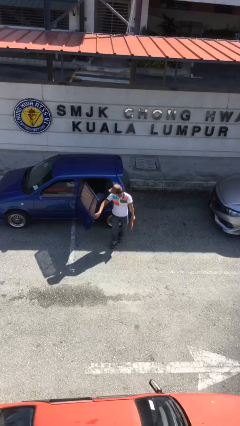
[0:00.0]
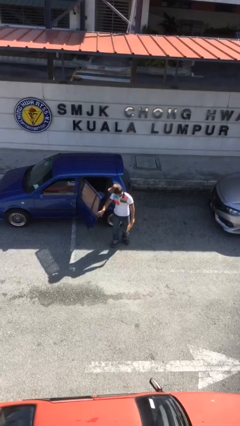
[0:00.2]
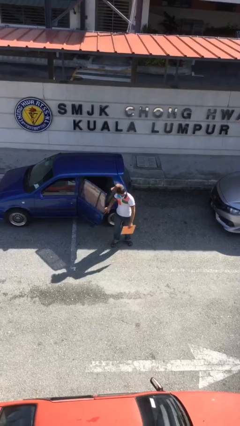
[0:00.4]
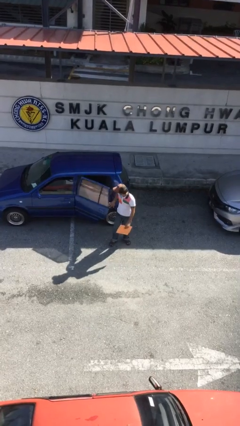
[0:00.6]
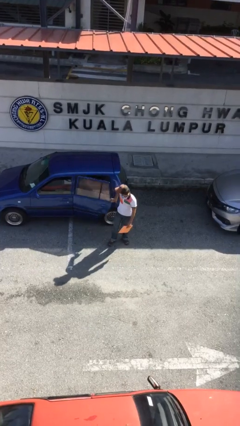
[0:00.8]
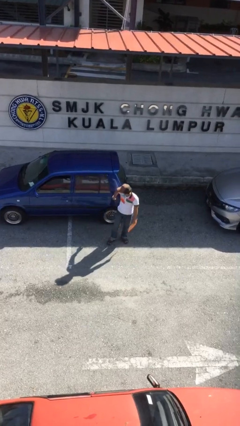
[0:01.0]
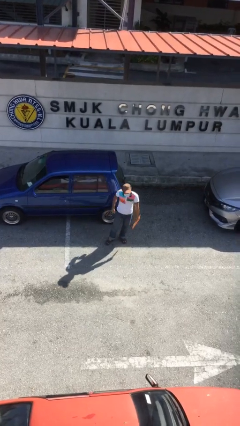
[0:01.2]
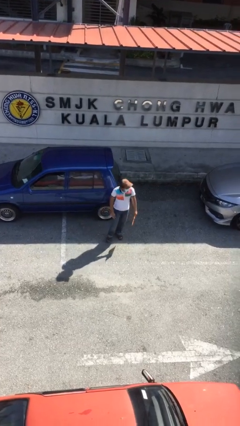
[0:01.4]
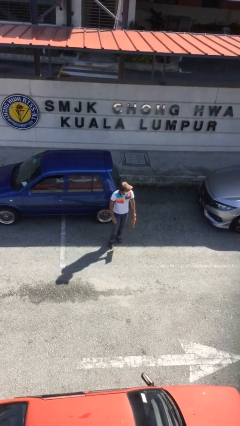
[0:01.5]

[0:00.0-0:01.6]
person closes car door

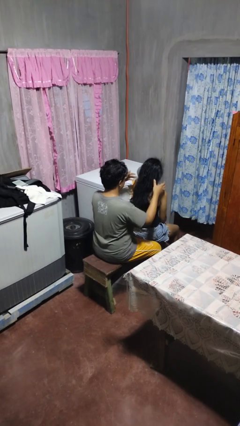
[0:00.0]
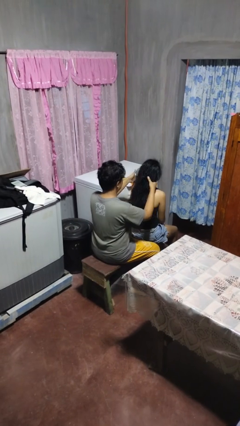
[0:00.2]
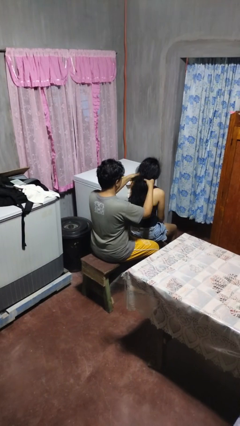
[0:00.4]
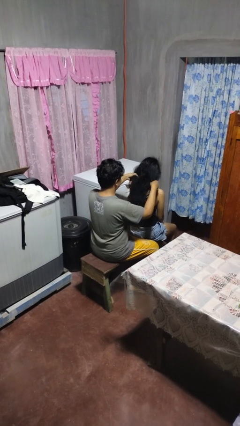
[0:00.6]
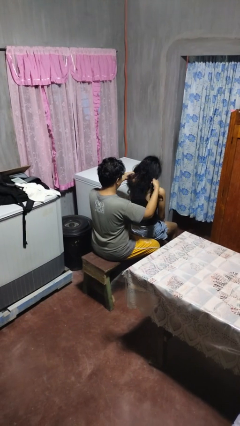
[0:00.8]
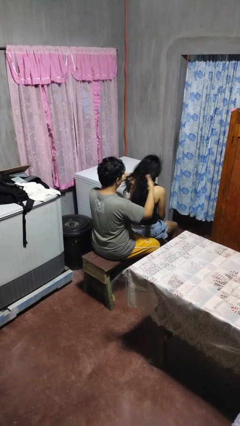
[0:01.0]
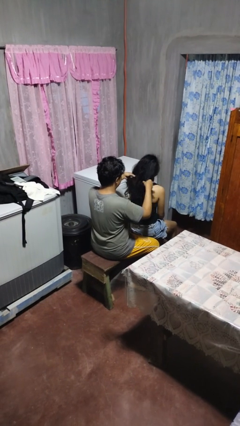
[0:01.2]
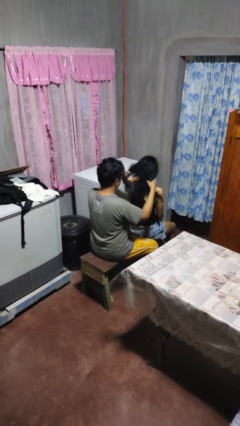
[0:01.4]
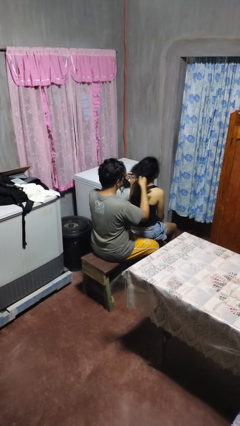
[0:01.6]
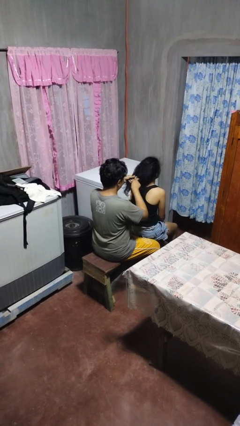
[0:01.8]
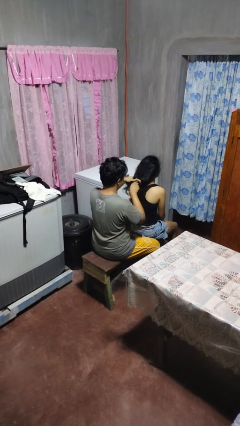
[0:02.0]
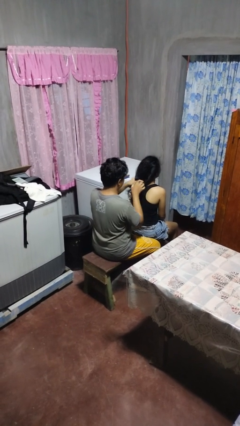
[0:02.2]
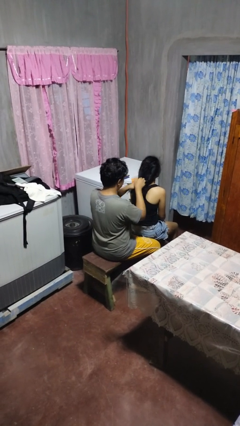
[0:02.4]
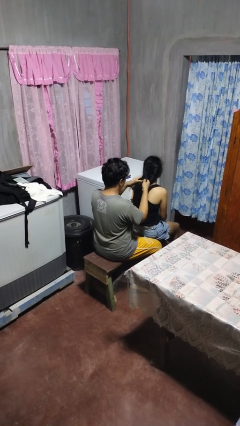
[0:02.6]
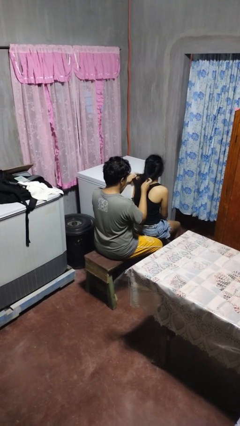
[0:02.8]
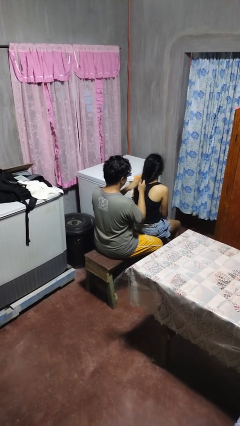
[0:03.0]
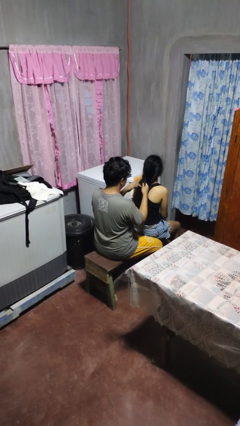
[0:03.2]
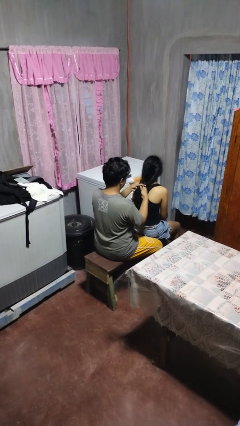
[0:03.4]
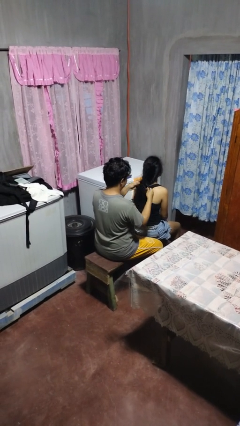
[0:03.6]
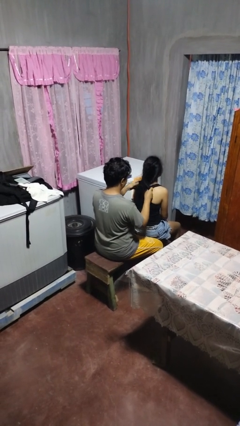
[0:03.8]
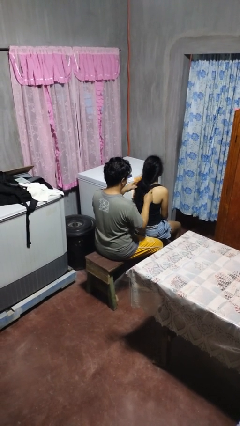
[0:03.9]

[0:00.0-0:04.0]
person braids hair of person

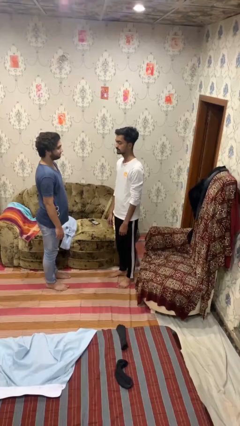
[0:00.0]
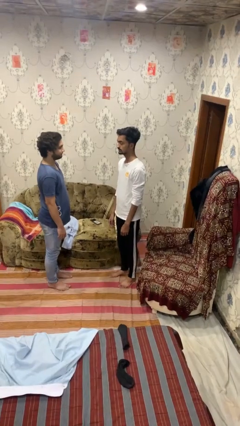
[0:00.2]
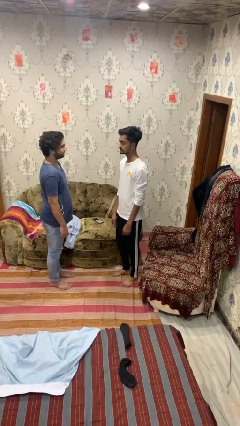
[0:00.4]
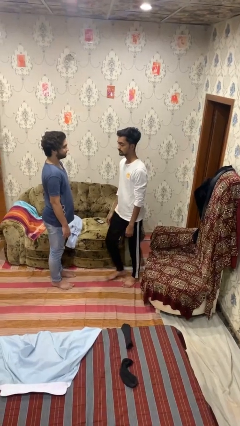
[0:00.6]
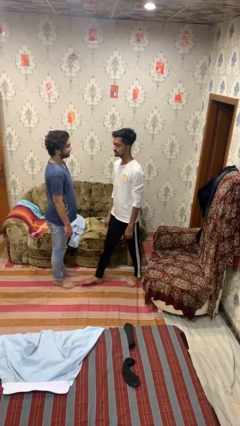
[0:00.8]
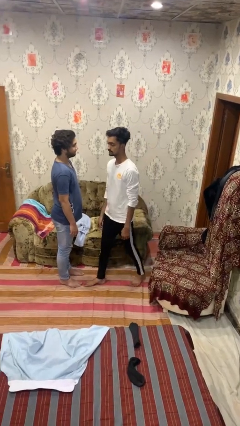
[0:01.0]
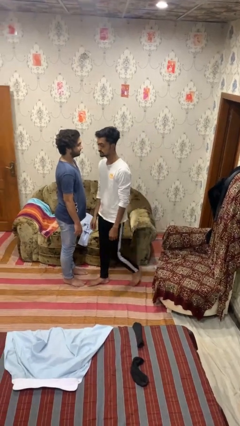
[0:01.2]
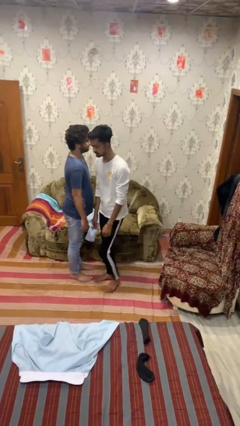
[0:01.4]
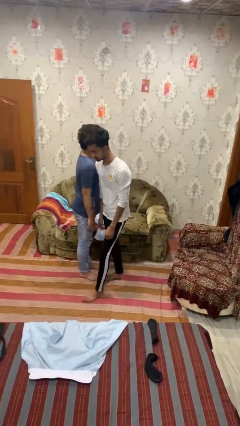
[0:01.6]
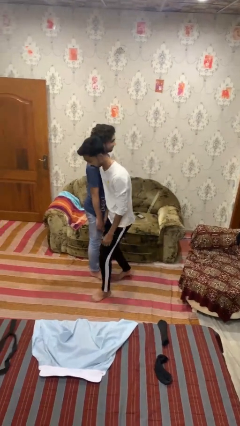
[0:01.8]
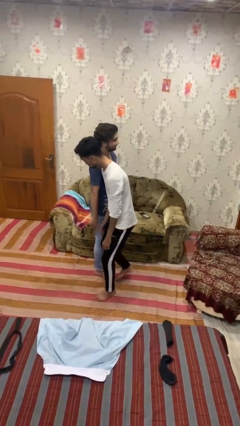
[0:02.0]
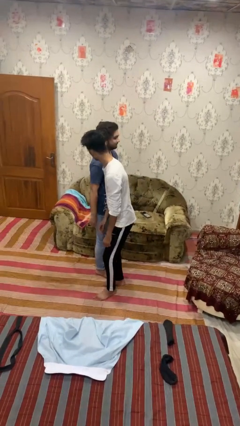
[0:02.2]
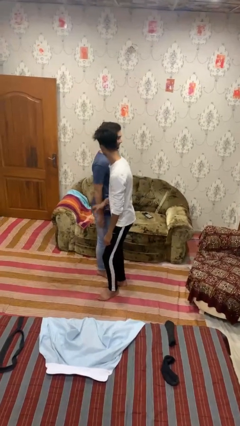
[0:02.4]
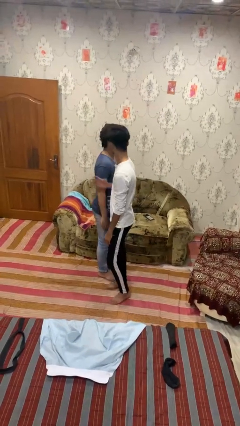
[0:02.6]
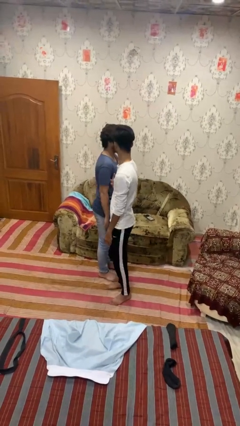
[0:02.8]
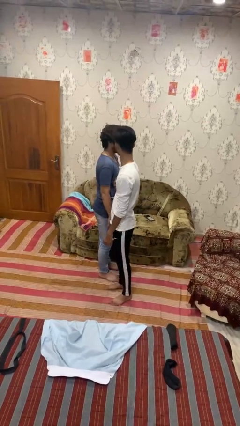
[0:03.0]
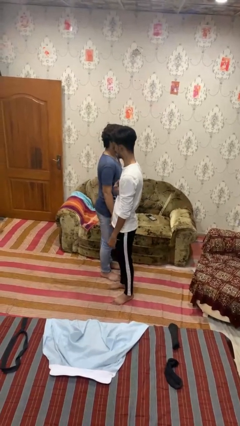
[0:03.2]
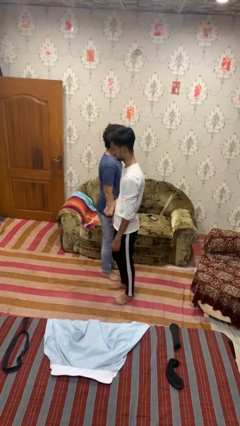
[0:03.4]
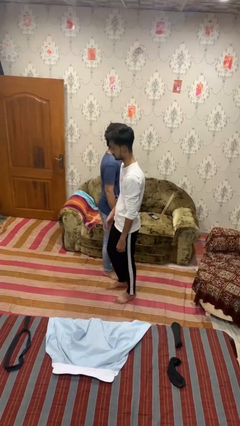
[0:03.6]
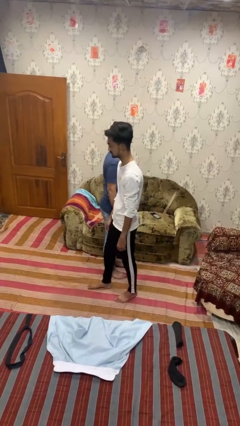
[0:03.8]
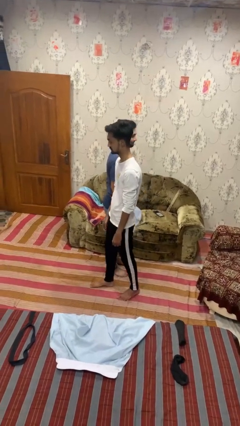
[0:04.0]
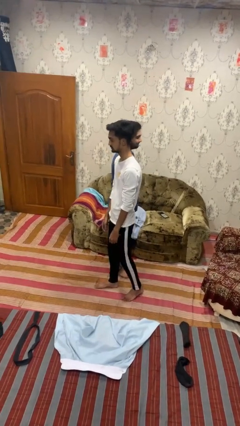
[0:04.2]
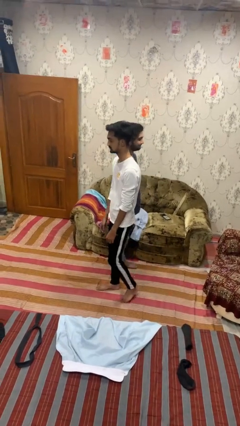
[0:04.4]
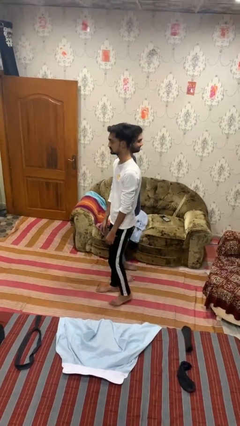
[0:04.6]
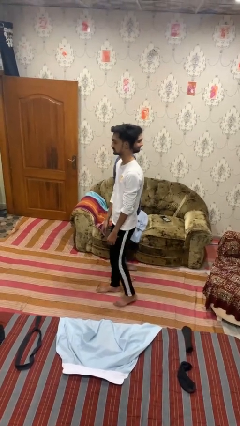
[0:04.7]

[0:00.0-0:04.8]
person bumps into person

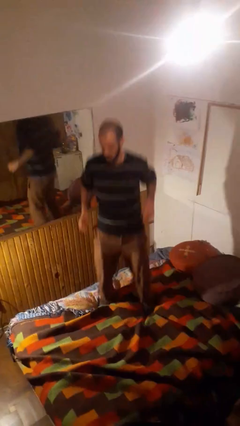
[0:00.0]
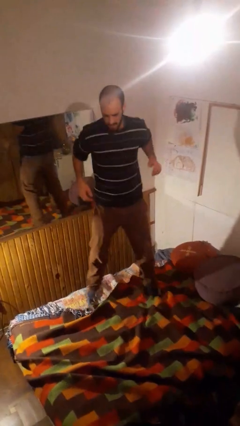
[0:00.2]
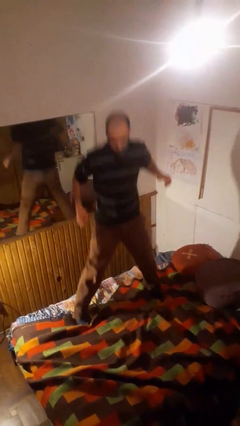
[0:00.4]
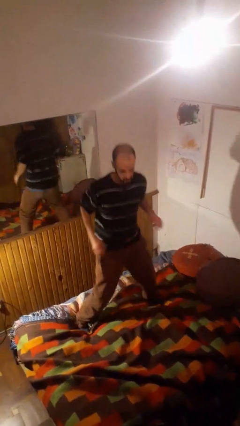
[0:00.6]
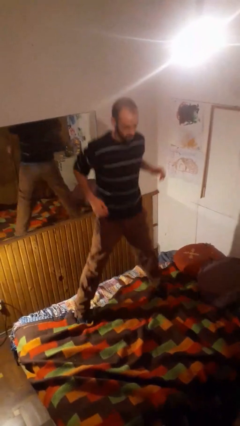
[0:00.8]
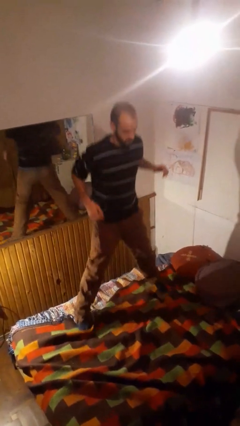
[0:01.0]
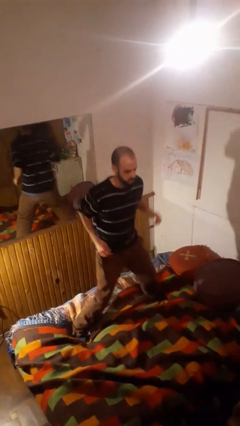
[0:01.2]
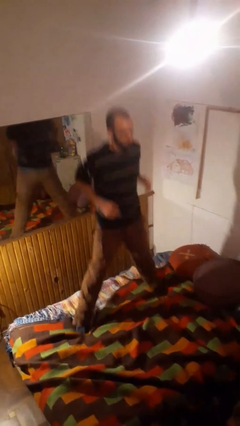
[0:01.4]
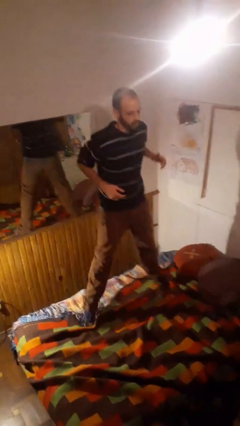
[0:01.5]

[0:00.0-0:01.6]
person jumps on bed

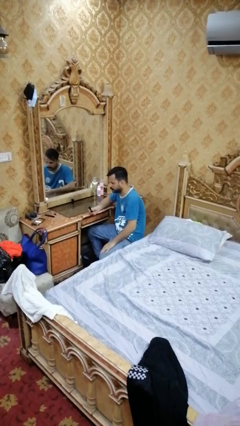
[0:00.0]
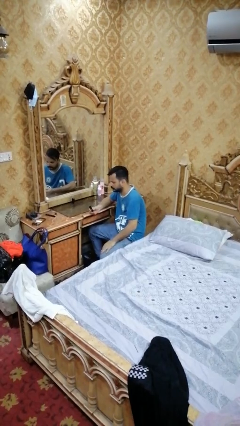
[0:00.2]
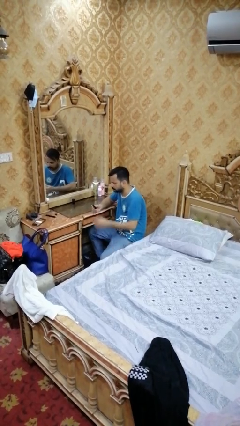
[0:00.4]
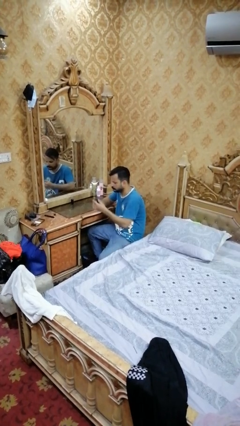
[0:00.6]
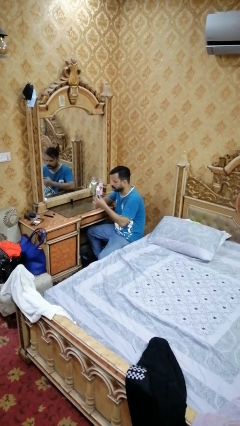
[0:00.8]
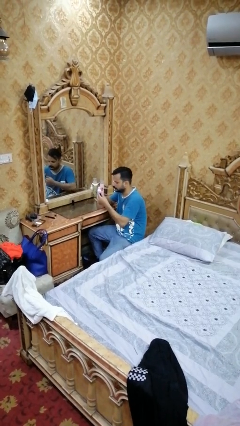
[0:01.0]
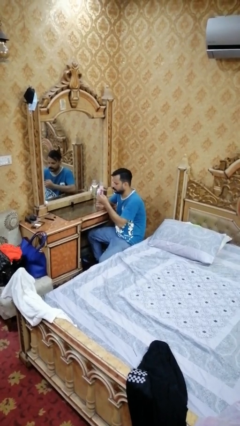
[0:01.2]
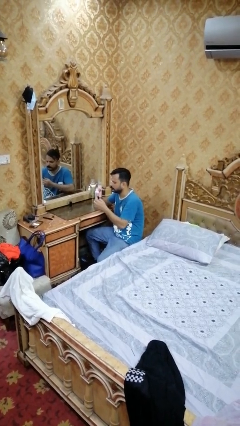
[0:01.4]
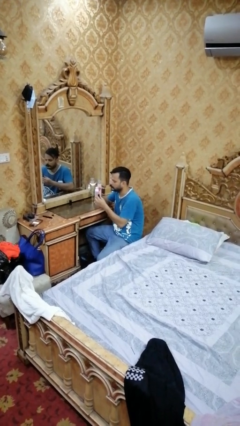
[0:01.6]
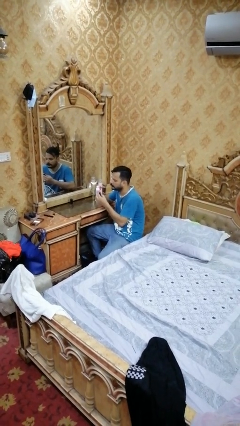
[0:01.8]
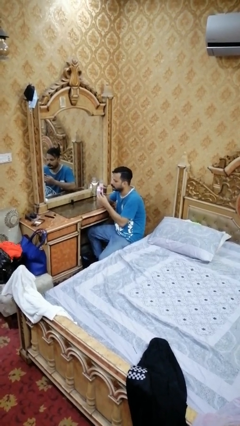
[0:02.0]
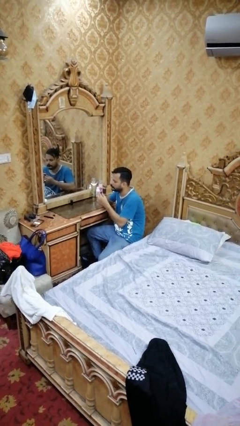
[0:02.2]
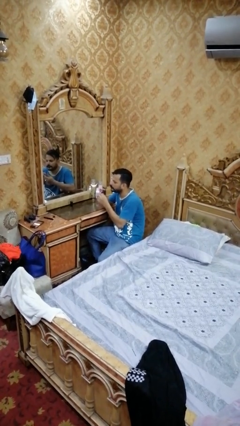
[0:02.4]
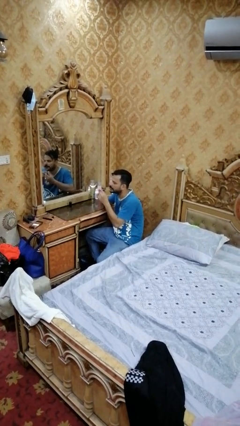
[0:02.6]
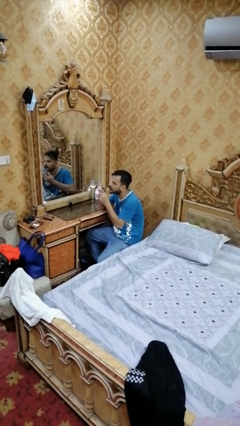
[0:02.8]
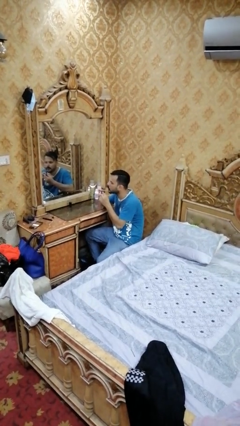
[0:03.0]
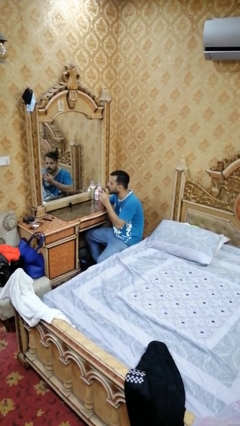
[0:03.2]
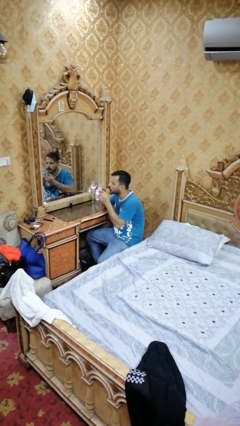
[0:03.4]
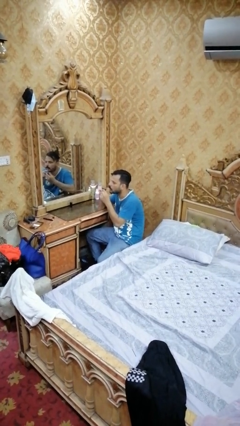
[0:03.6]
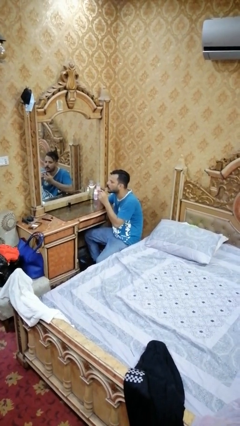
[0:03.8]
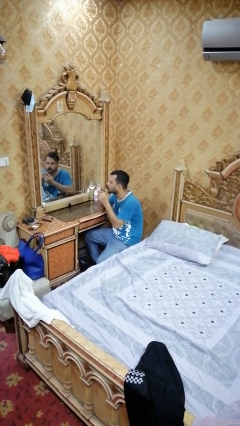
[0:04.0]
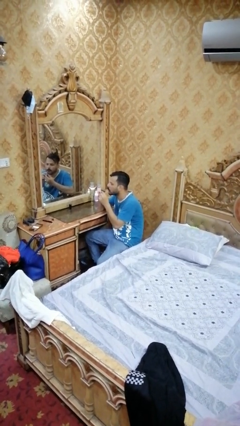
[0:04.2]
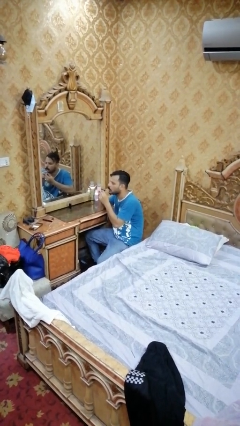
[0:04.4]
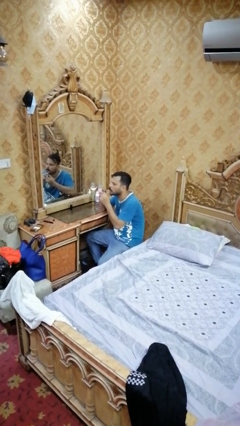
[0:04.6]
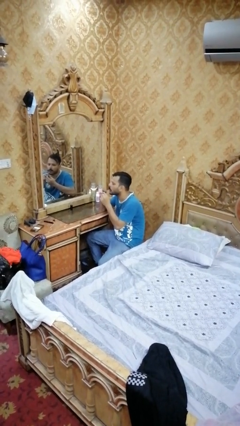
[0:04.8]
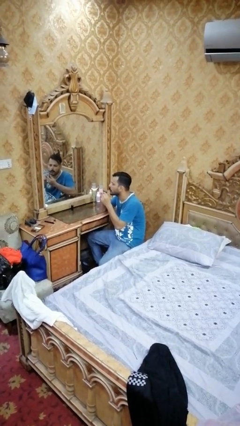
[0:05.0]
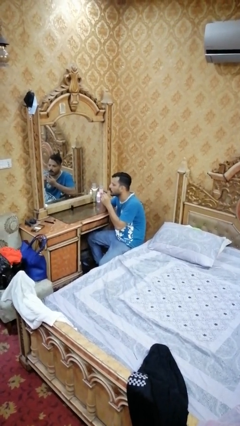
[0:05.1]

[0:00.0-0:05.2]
person applies lip makeup

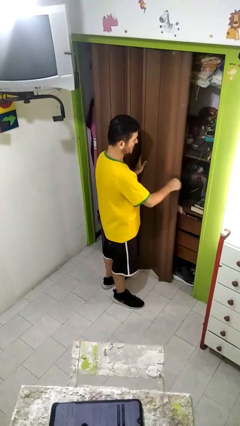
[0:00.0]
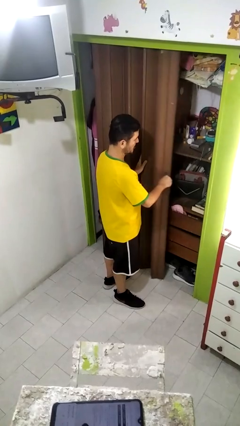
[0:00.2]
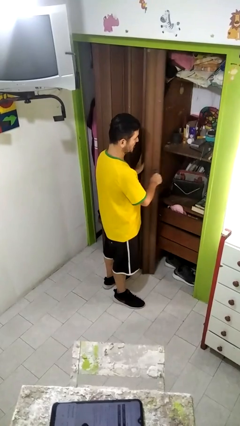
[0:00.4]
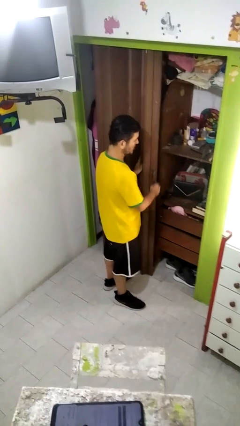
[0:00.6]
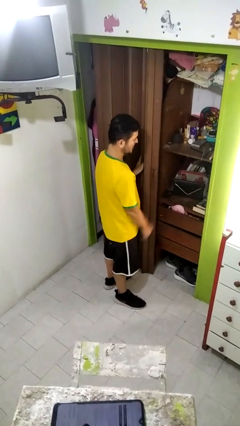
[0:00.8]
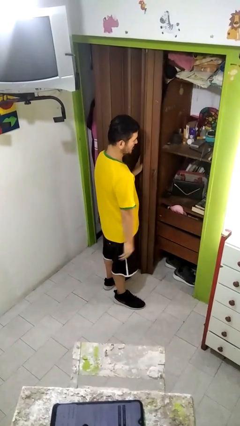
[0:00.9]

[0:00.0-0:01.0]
person opens closet door
